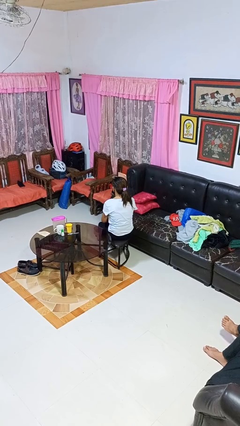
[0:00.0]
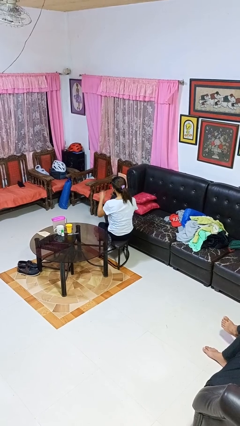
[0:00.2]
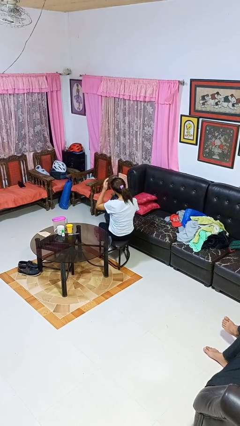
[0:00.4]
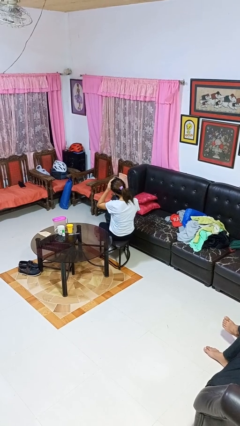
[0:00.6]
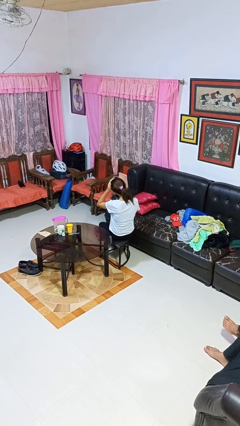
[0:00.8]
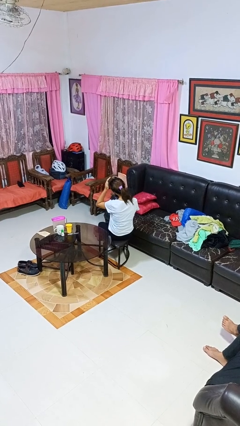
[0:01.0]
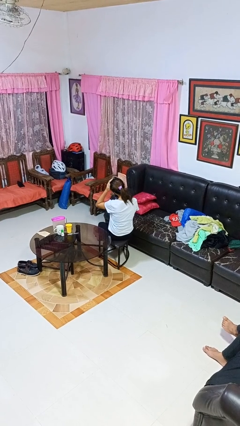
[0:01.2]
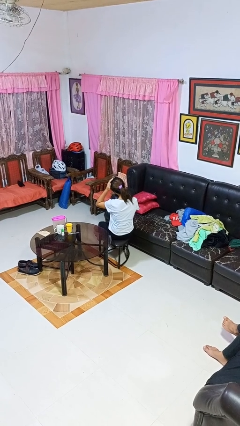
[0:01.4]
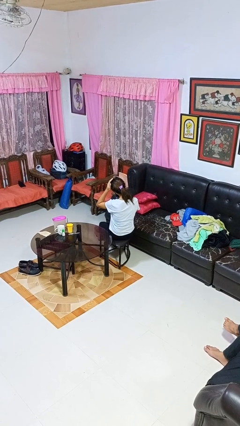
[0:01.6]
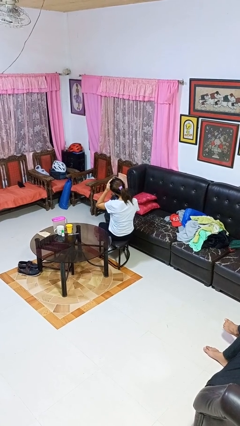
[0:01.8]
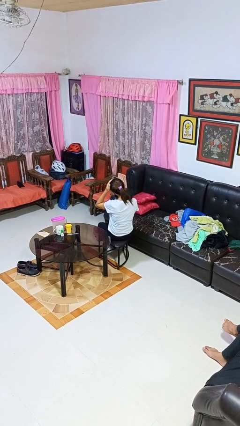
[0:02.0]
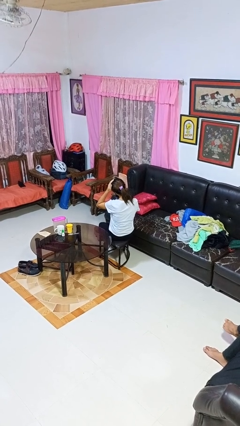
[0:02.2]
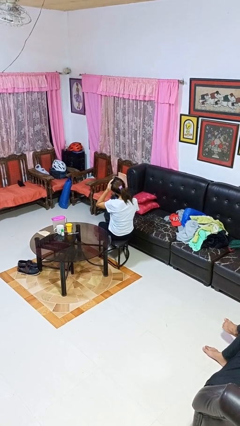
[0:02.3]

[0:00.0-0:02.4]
person pats head

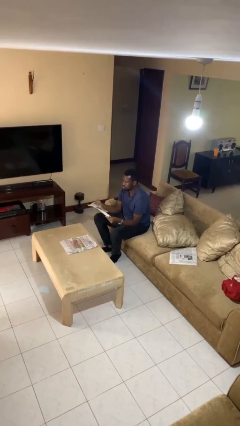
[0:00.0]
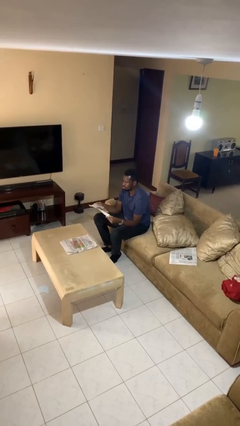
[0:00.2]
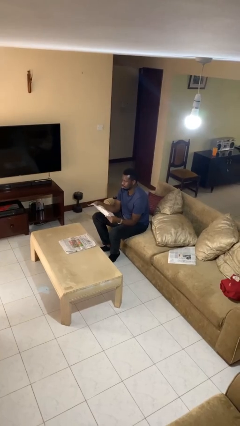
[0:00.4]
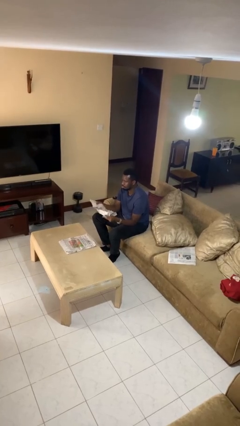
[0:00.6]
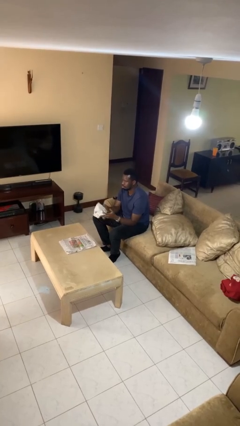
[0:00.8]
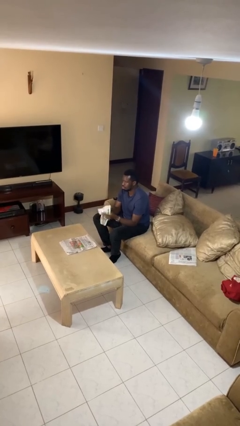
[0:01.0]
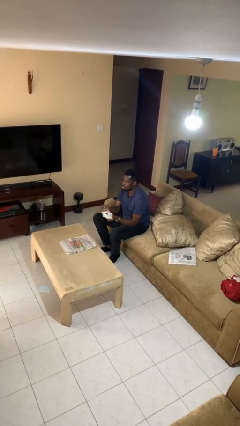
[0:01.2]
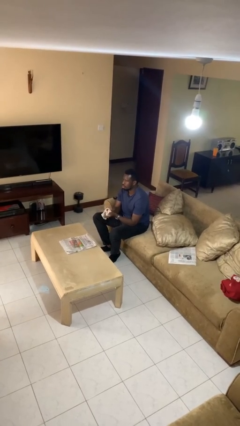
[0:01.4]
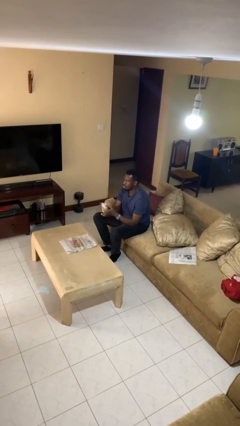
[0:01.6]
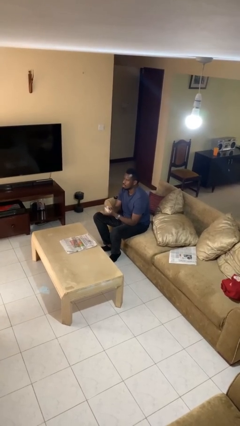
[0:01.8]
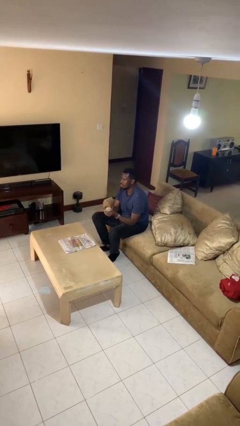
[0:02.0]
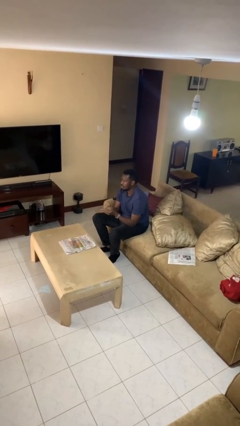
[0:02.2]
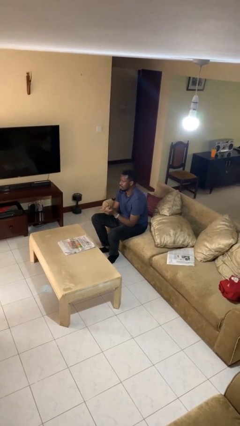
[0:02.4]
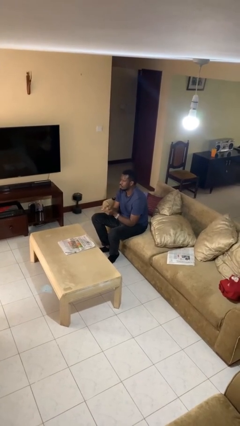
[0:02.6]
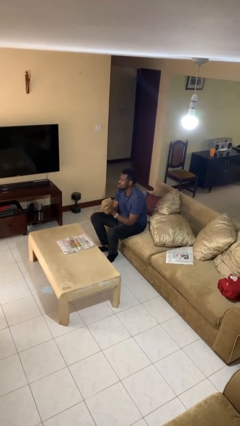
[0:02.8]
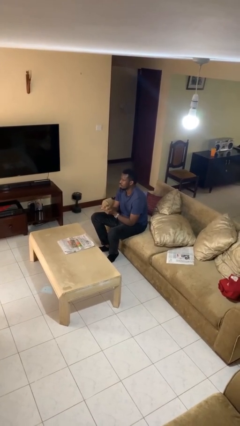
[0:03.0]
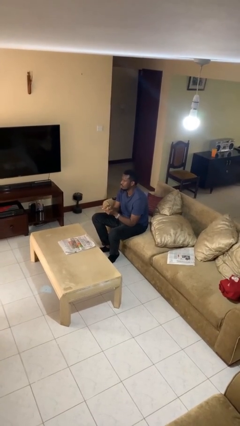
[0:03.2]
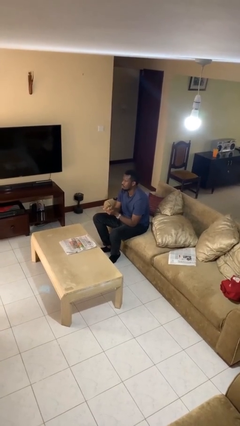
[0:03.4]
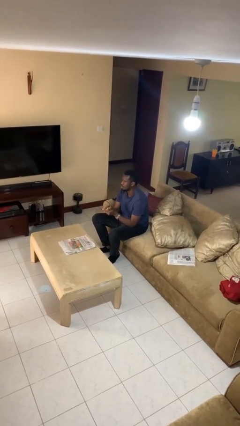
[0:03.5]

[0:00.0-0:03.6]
person crumples paper

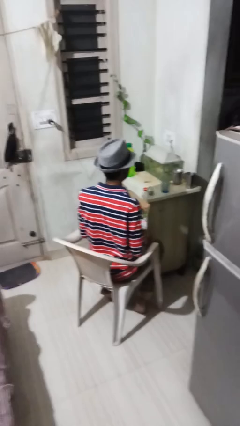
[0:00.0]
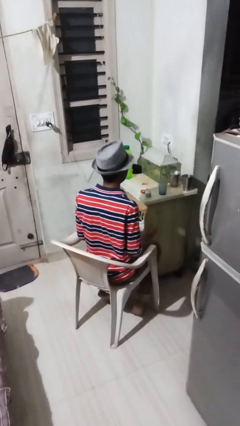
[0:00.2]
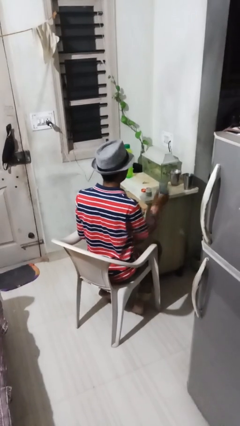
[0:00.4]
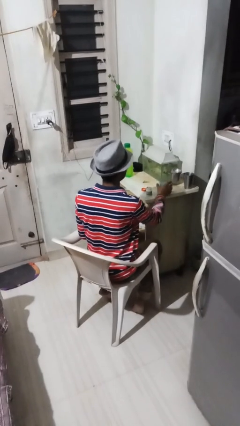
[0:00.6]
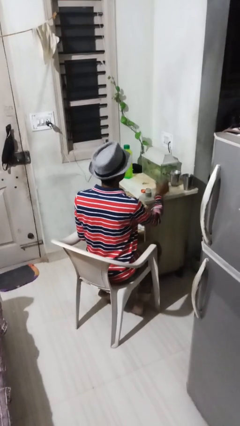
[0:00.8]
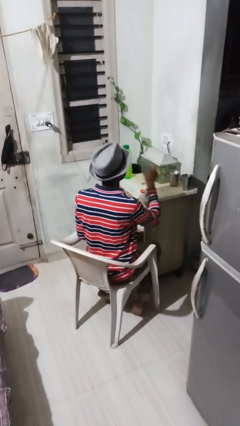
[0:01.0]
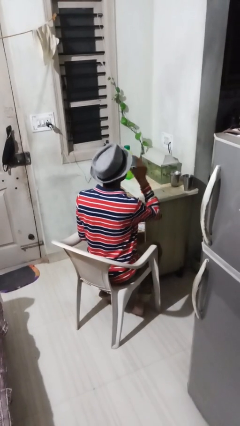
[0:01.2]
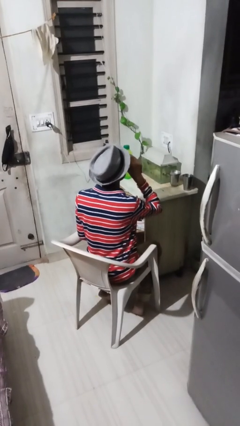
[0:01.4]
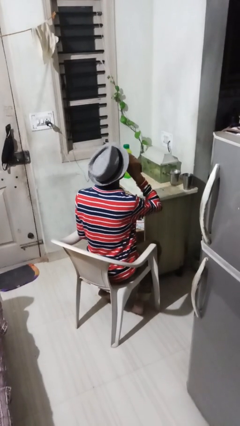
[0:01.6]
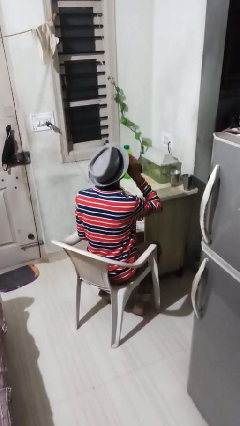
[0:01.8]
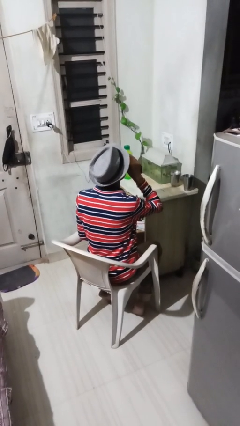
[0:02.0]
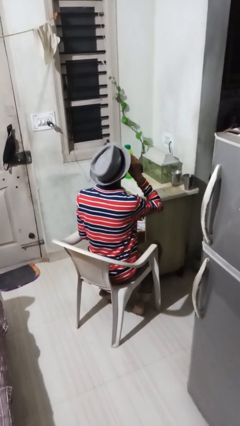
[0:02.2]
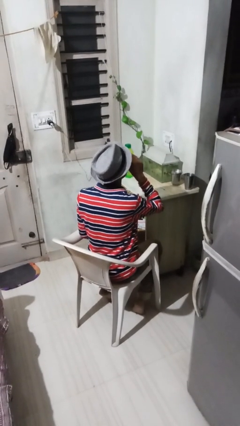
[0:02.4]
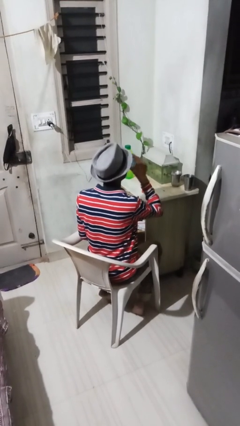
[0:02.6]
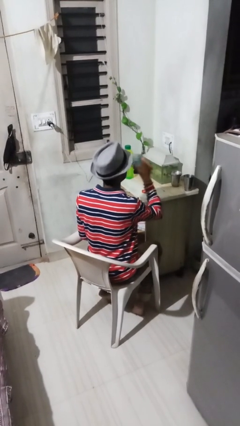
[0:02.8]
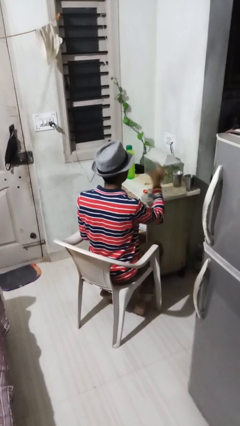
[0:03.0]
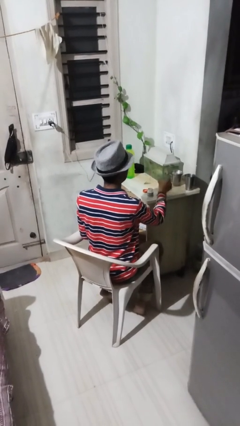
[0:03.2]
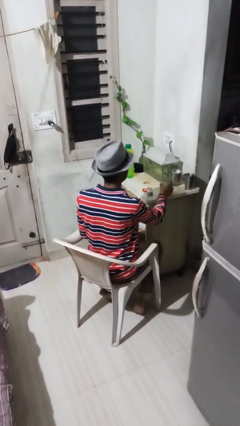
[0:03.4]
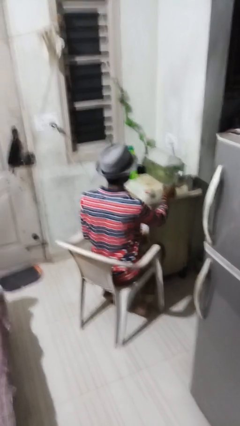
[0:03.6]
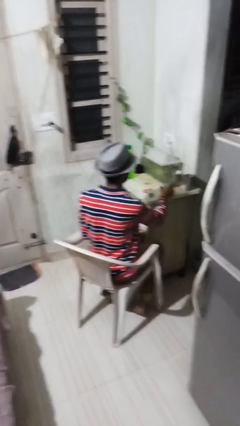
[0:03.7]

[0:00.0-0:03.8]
person drinks from cup

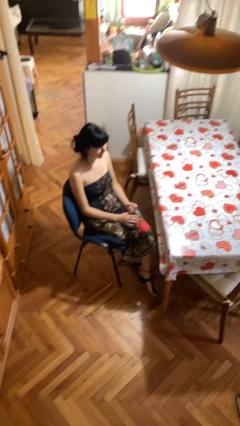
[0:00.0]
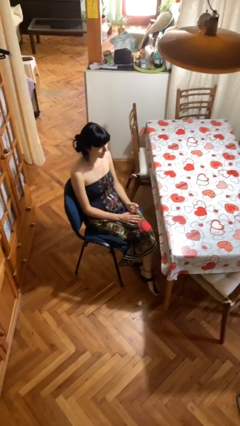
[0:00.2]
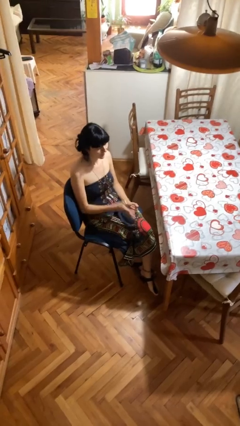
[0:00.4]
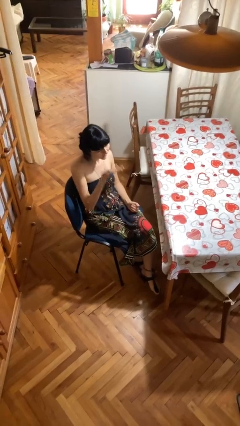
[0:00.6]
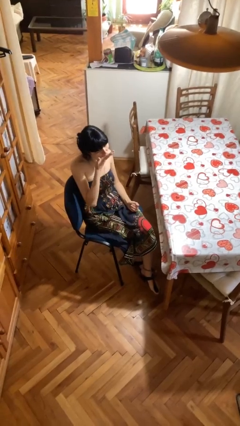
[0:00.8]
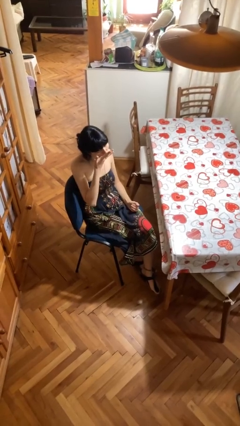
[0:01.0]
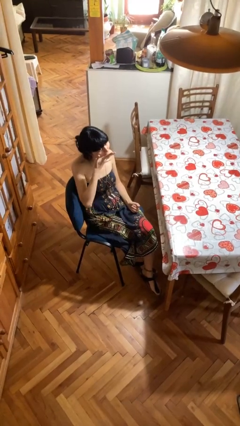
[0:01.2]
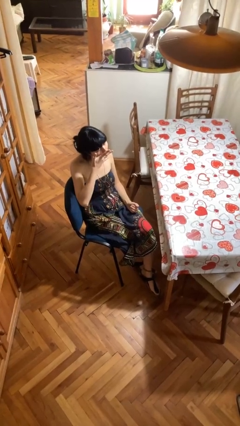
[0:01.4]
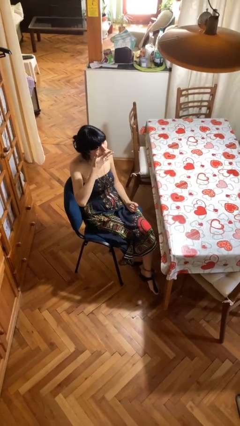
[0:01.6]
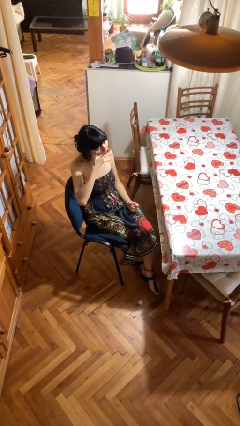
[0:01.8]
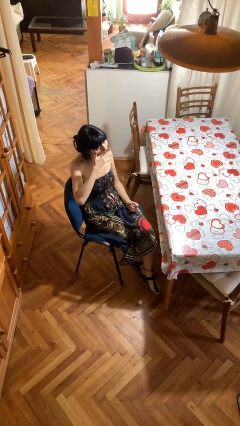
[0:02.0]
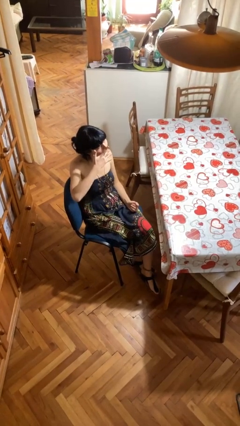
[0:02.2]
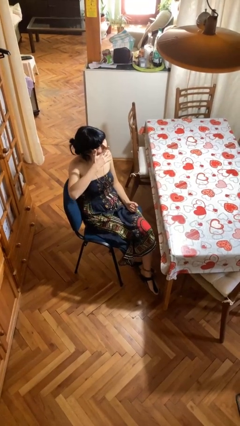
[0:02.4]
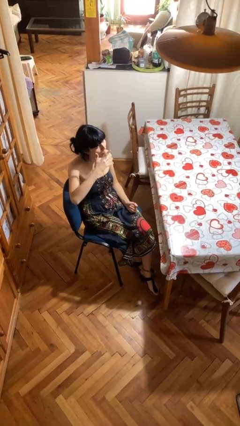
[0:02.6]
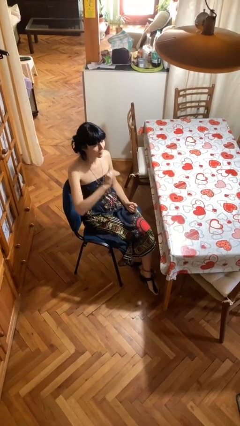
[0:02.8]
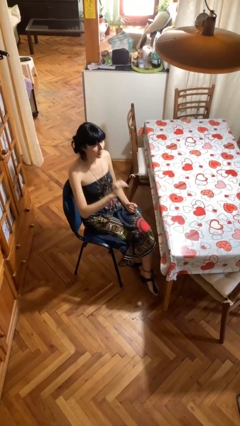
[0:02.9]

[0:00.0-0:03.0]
person licks fingers

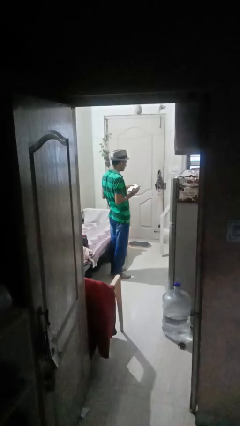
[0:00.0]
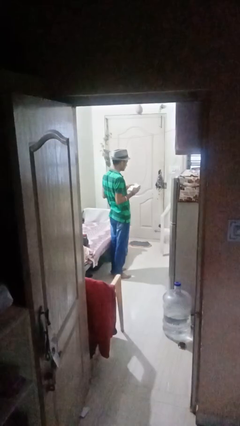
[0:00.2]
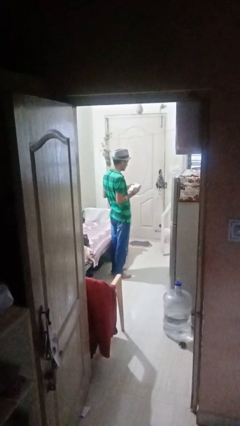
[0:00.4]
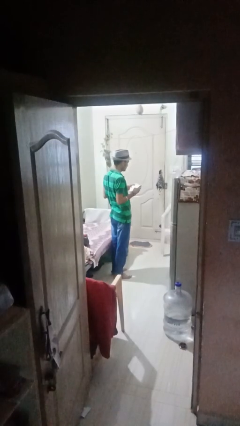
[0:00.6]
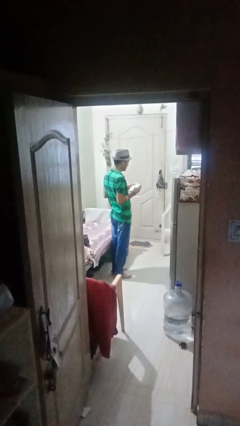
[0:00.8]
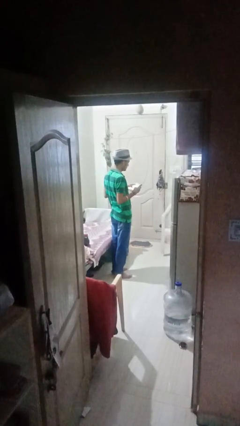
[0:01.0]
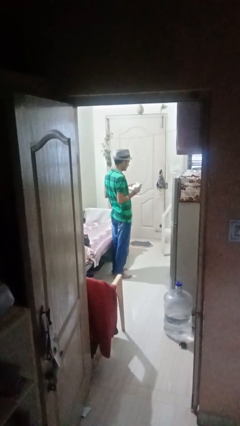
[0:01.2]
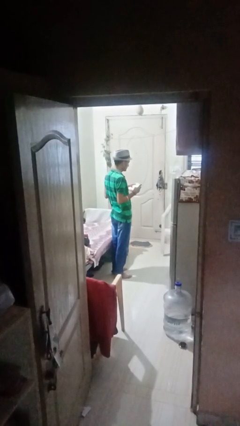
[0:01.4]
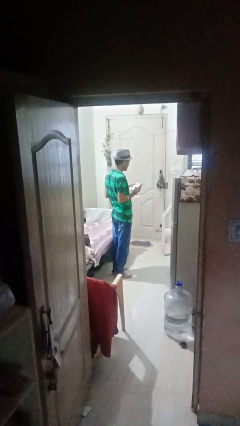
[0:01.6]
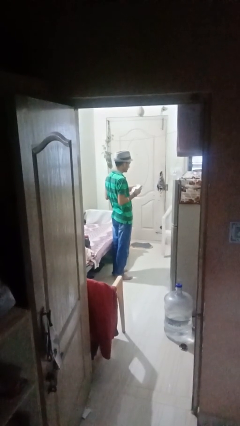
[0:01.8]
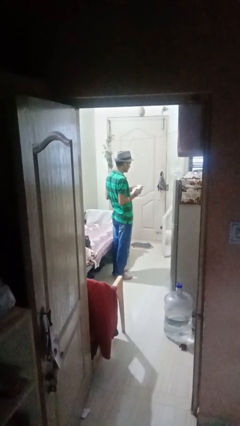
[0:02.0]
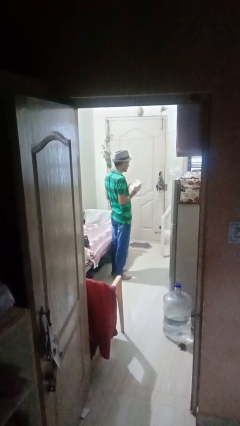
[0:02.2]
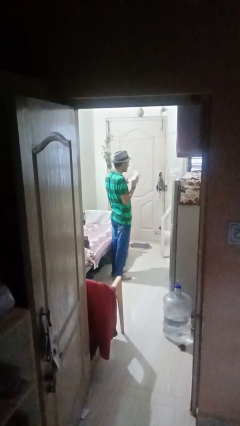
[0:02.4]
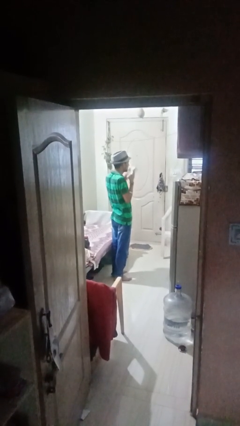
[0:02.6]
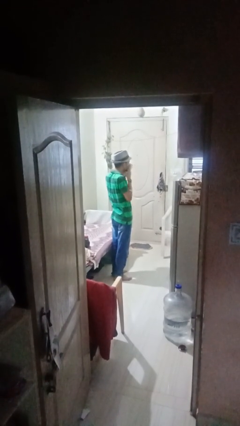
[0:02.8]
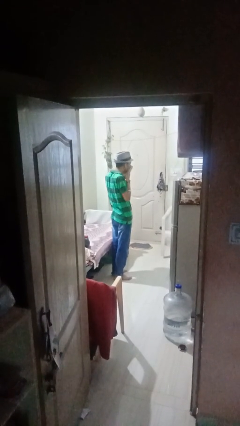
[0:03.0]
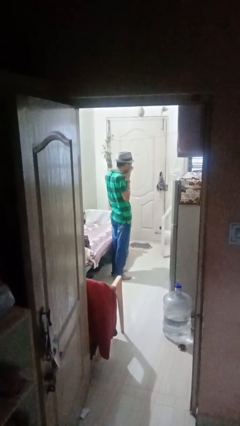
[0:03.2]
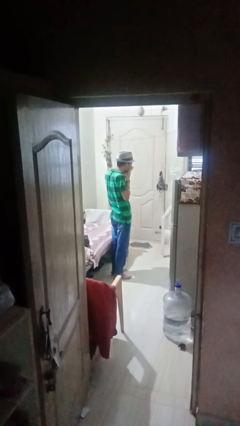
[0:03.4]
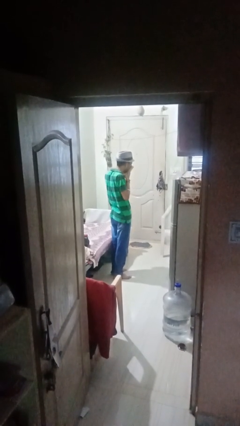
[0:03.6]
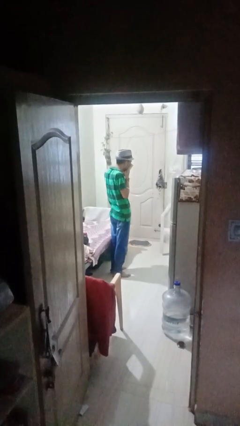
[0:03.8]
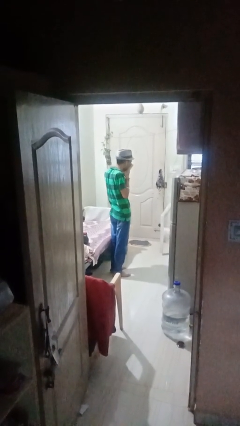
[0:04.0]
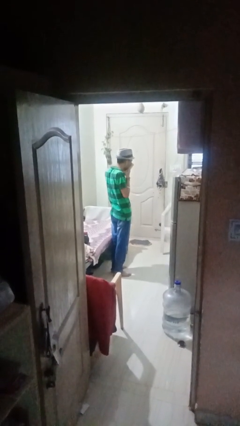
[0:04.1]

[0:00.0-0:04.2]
person blows nose

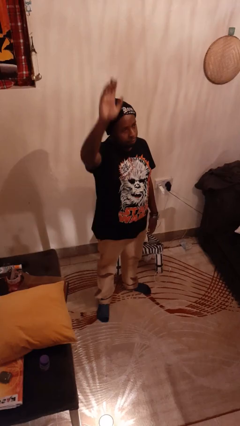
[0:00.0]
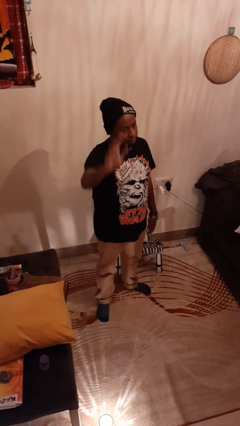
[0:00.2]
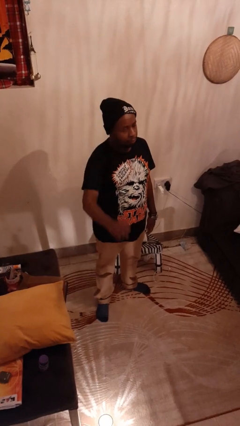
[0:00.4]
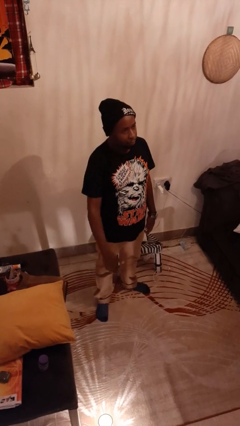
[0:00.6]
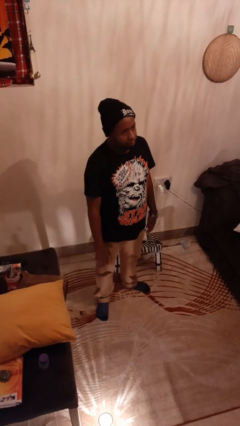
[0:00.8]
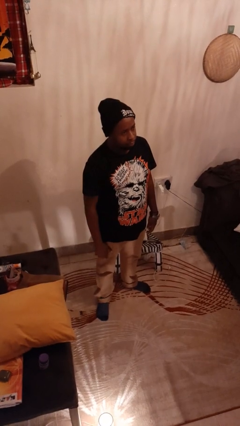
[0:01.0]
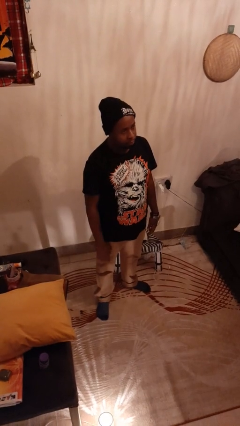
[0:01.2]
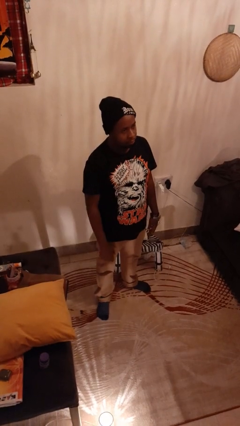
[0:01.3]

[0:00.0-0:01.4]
person gestures lower hand
